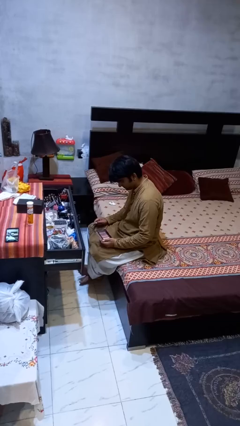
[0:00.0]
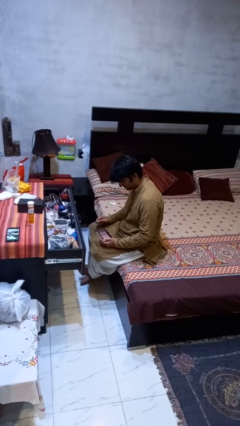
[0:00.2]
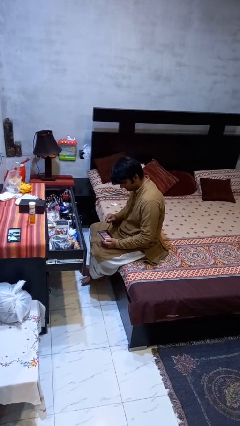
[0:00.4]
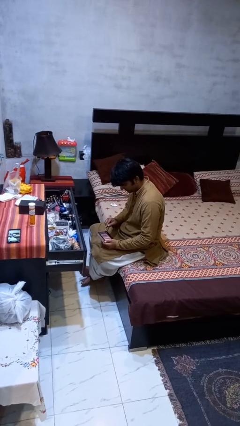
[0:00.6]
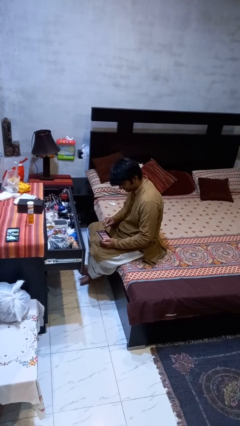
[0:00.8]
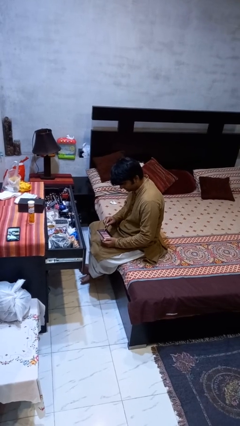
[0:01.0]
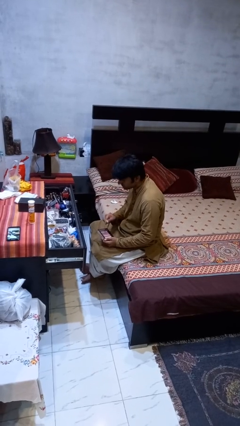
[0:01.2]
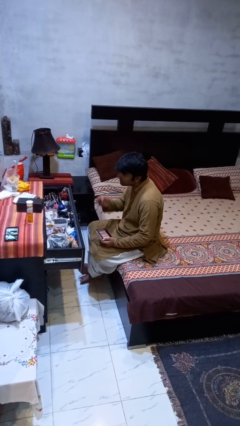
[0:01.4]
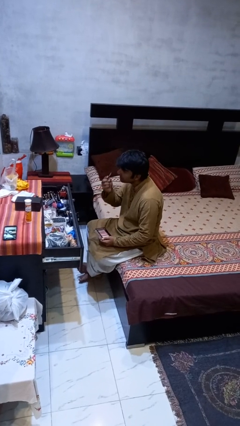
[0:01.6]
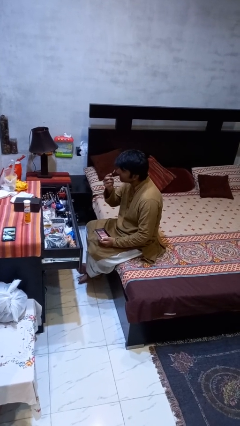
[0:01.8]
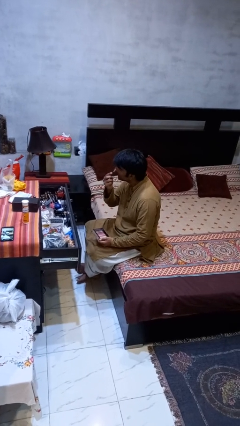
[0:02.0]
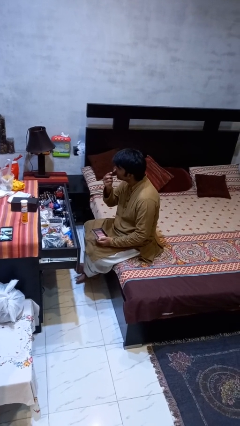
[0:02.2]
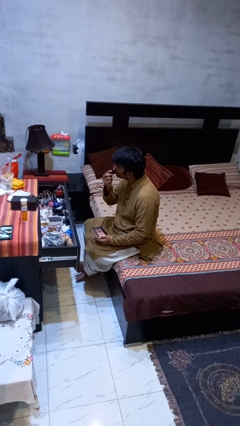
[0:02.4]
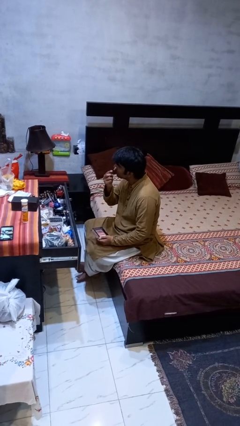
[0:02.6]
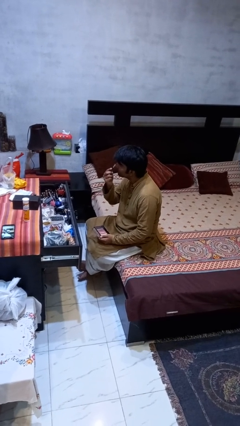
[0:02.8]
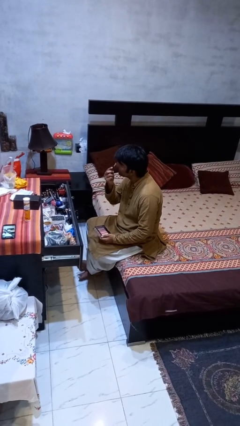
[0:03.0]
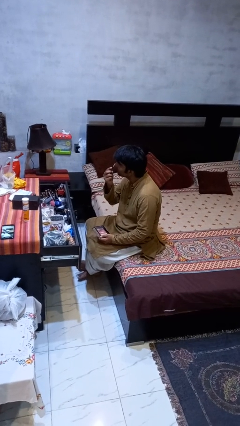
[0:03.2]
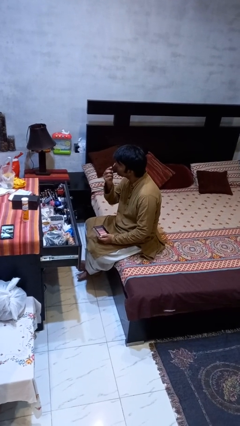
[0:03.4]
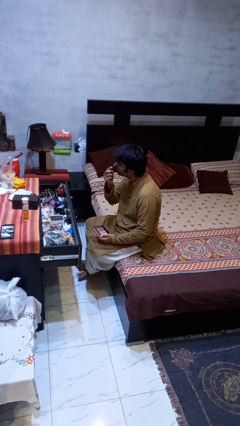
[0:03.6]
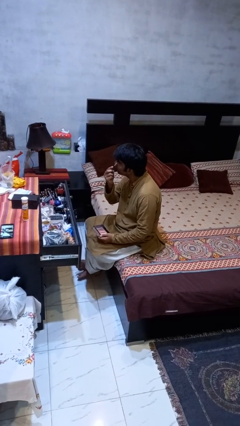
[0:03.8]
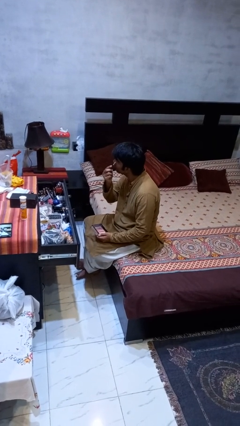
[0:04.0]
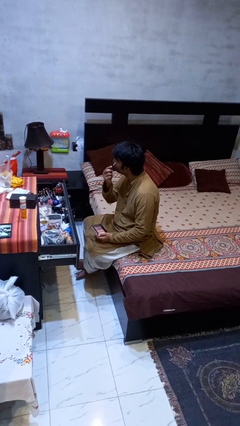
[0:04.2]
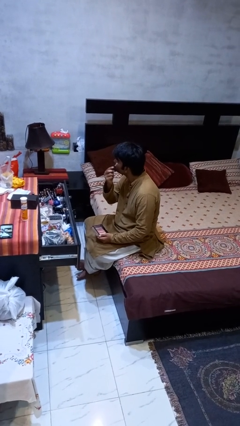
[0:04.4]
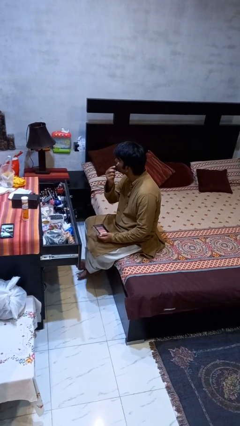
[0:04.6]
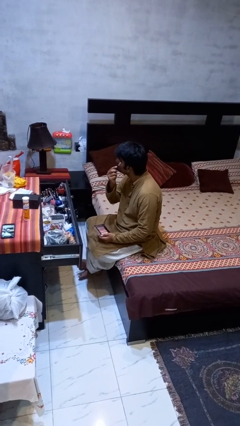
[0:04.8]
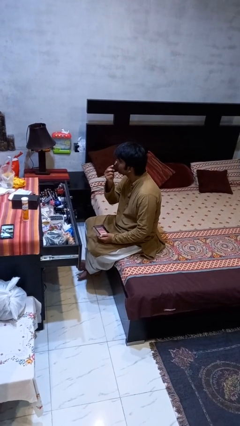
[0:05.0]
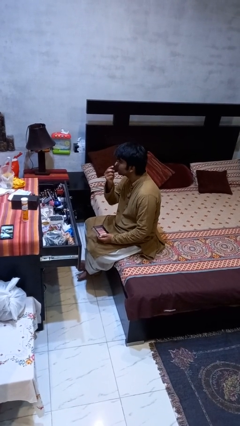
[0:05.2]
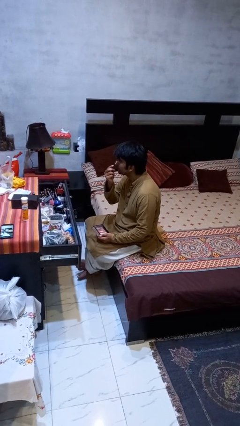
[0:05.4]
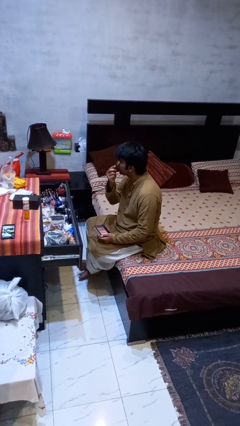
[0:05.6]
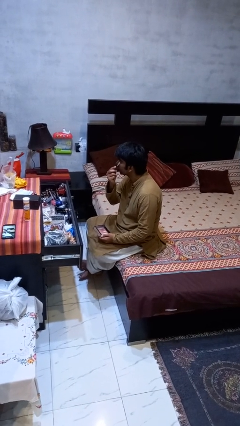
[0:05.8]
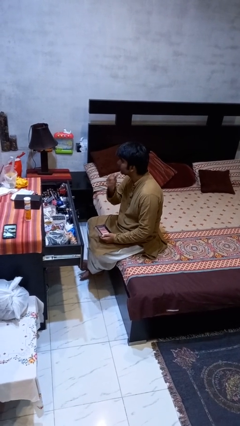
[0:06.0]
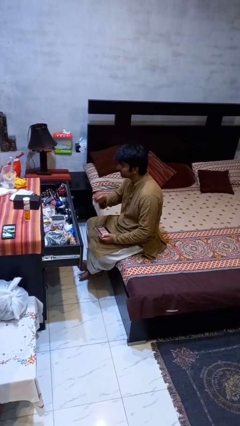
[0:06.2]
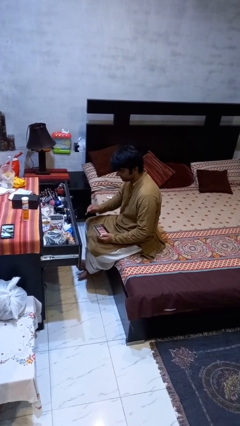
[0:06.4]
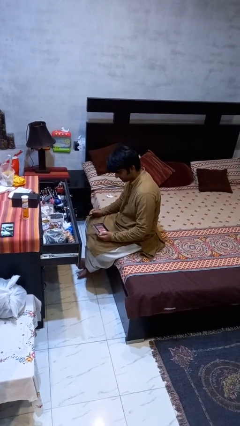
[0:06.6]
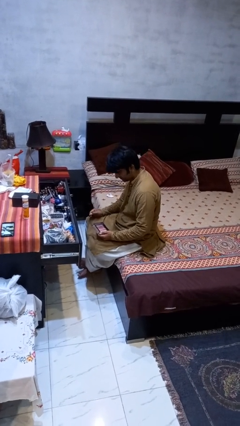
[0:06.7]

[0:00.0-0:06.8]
person applies eye makeup

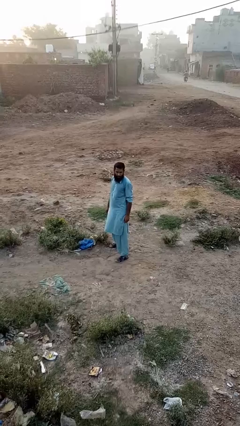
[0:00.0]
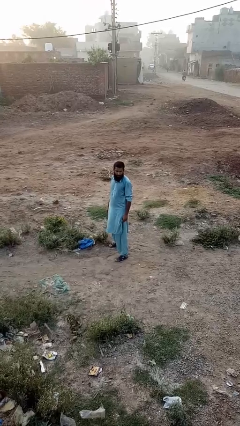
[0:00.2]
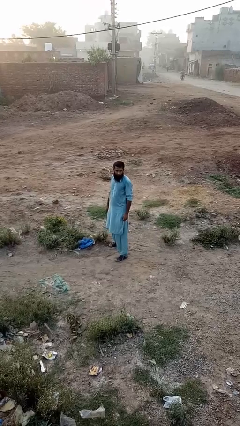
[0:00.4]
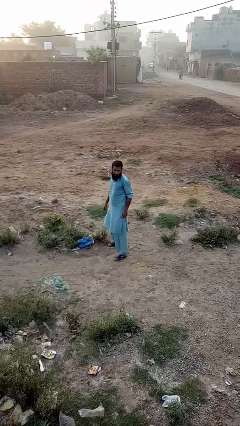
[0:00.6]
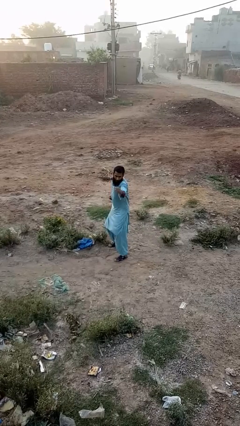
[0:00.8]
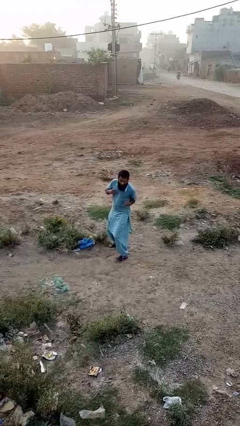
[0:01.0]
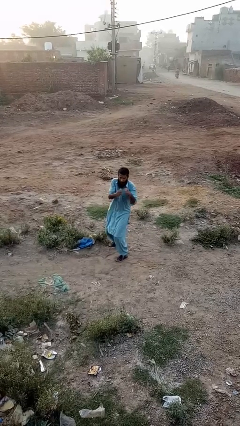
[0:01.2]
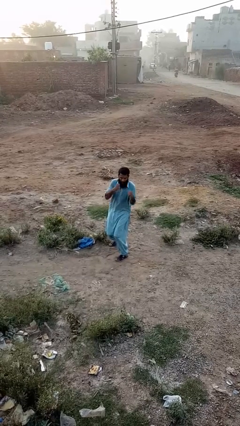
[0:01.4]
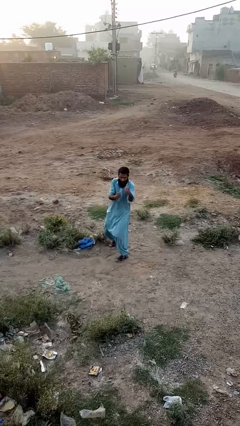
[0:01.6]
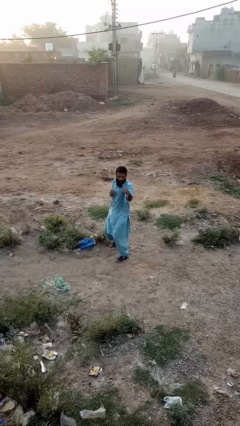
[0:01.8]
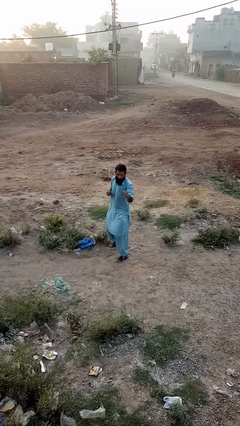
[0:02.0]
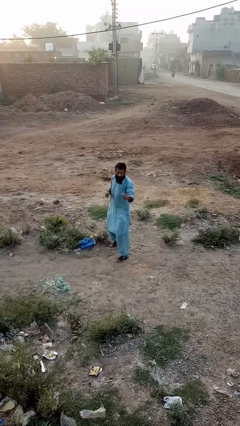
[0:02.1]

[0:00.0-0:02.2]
person punches

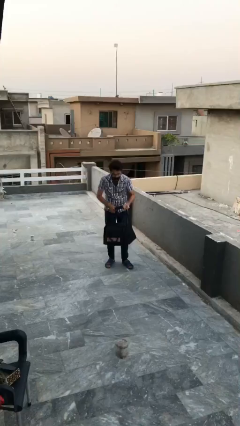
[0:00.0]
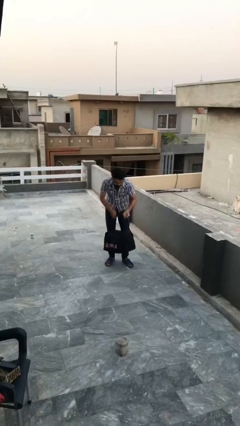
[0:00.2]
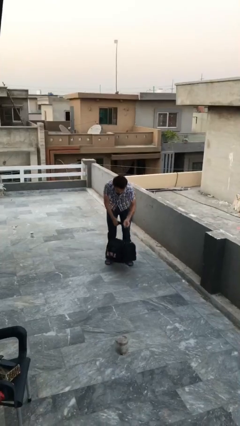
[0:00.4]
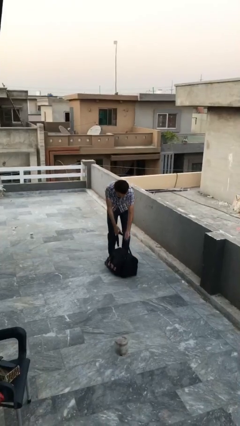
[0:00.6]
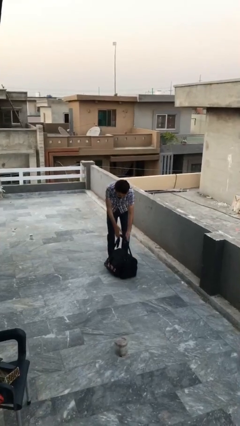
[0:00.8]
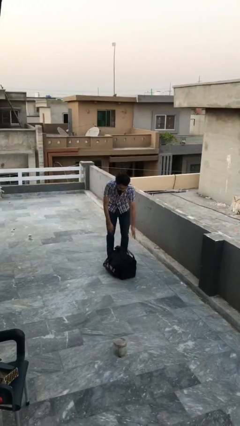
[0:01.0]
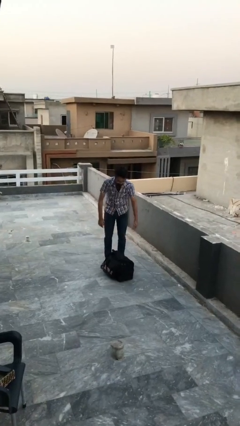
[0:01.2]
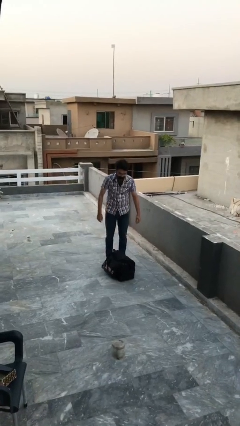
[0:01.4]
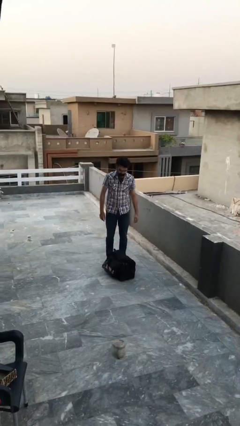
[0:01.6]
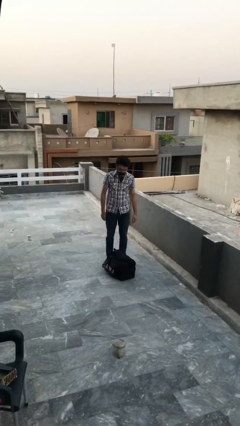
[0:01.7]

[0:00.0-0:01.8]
person puts down object on floor

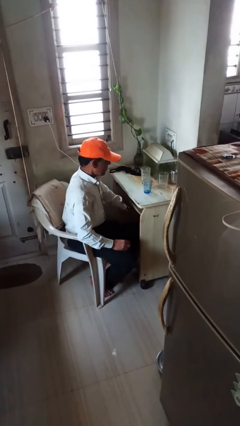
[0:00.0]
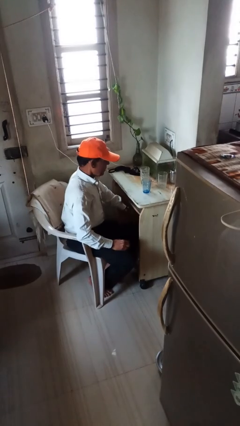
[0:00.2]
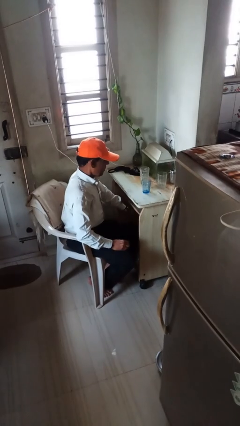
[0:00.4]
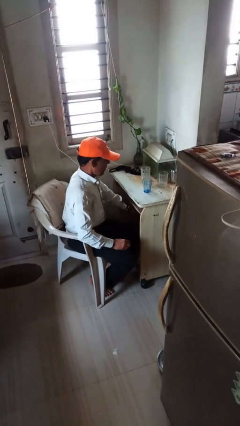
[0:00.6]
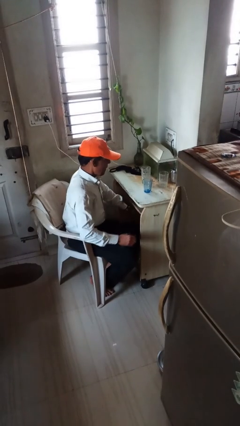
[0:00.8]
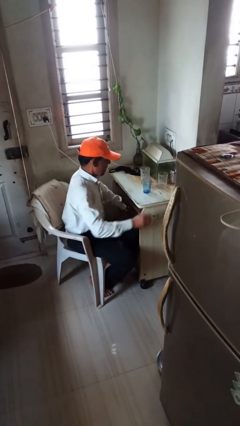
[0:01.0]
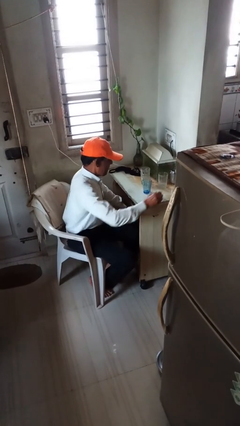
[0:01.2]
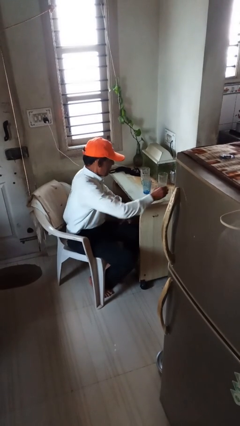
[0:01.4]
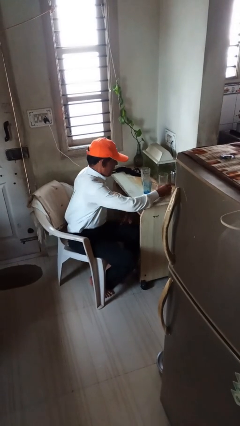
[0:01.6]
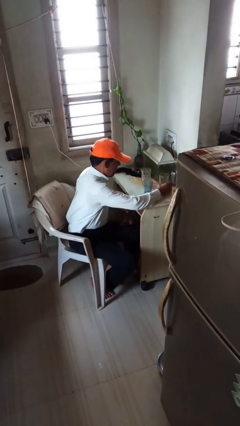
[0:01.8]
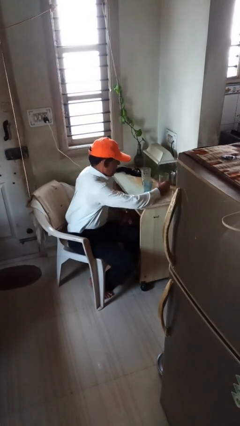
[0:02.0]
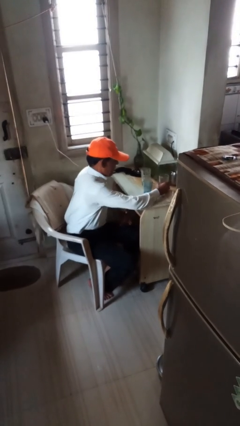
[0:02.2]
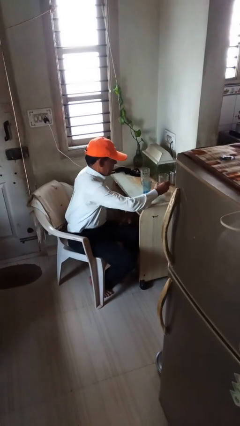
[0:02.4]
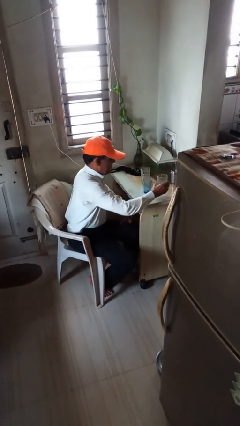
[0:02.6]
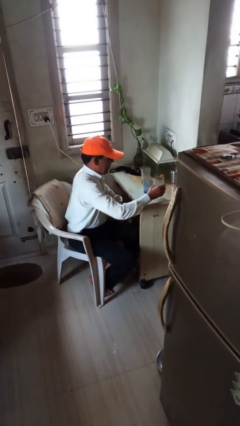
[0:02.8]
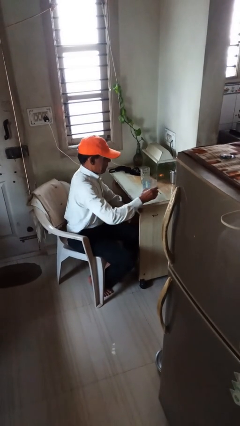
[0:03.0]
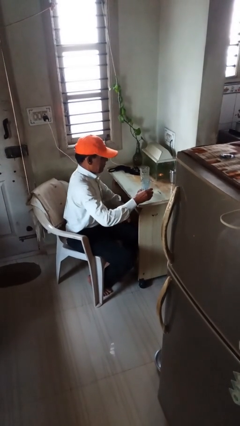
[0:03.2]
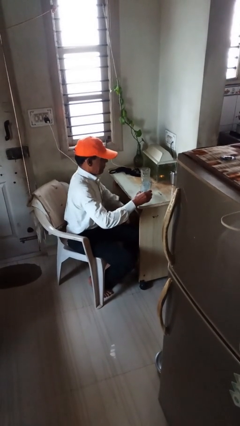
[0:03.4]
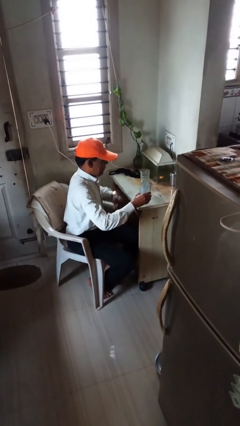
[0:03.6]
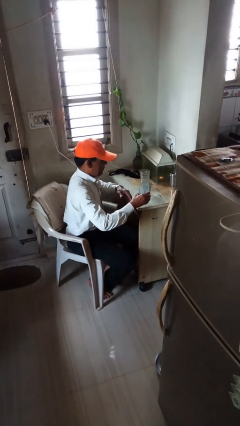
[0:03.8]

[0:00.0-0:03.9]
person picks up object from table

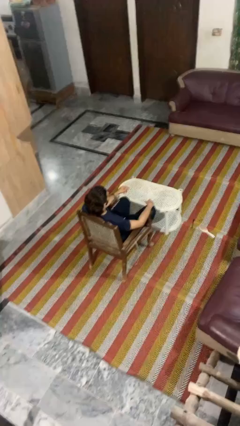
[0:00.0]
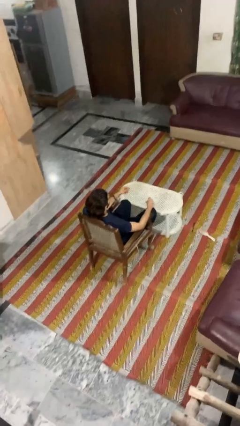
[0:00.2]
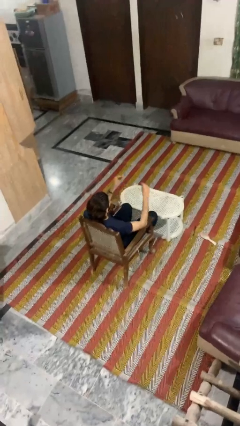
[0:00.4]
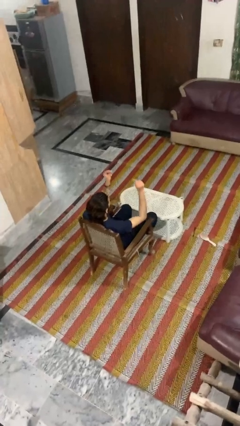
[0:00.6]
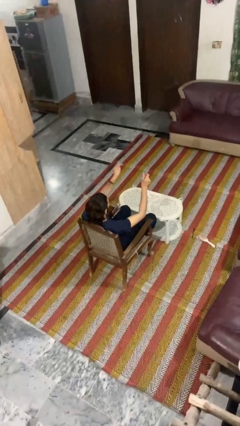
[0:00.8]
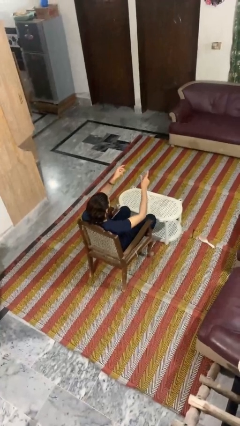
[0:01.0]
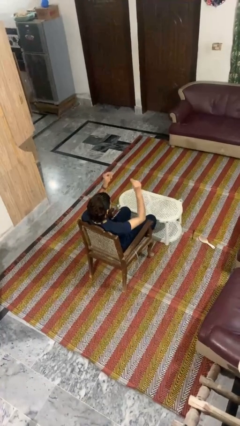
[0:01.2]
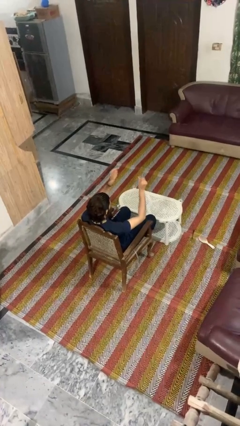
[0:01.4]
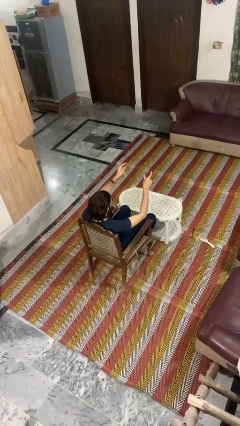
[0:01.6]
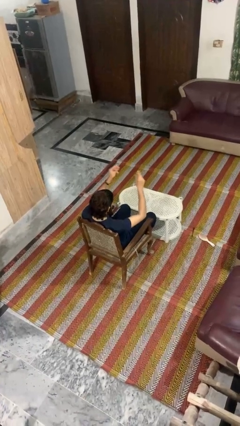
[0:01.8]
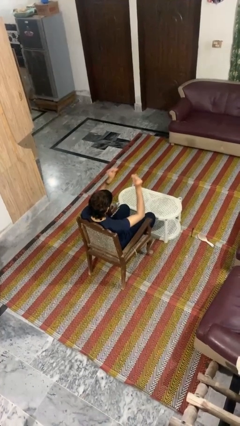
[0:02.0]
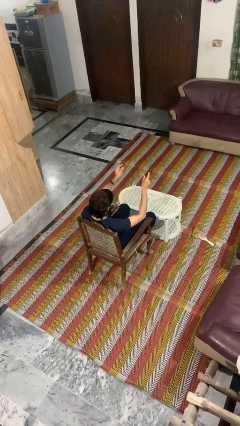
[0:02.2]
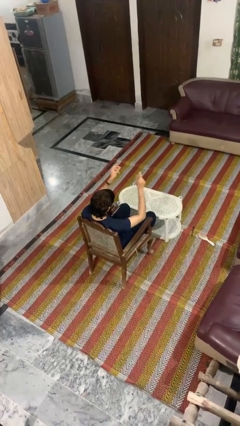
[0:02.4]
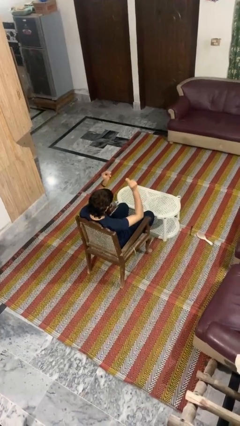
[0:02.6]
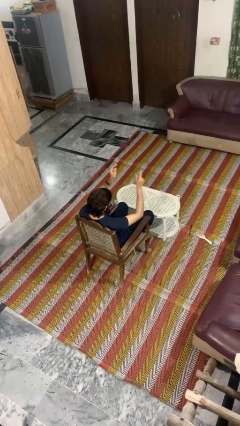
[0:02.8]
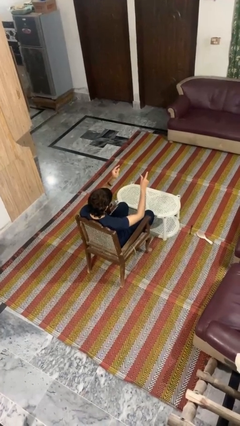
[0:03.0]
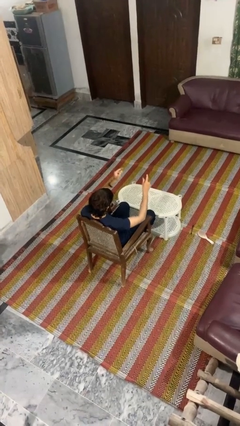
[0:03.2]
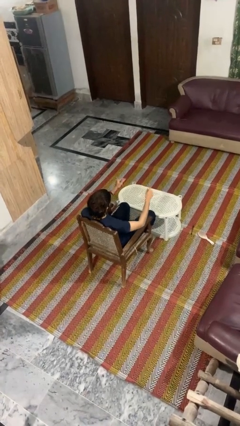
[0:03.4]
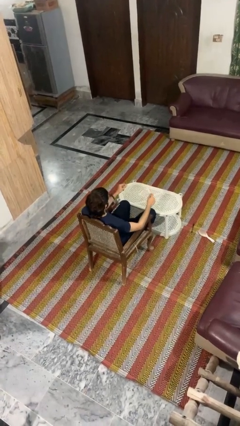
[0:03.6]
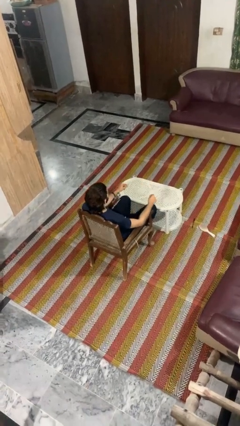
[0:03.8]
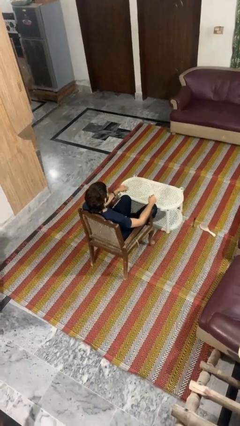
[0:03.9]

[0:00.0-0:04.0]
person snaps fingers
